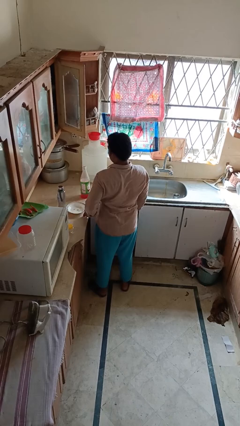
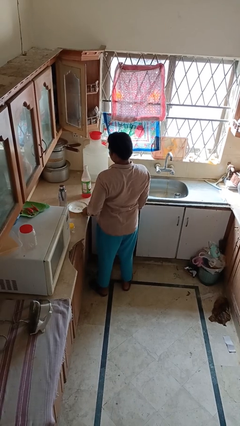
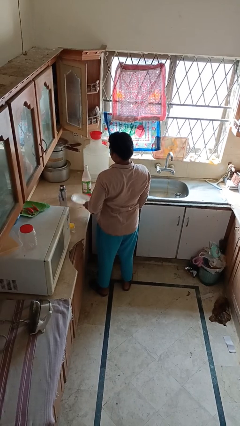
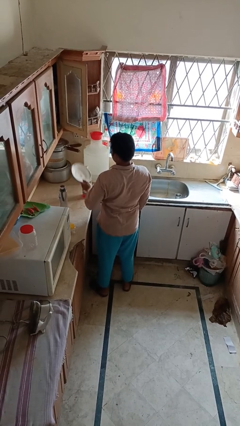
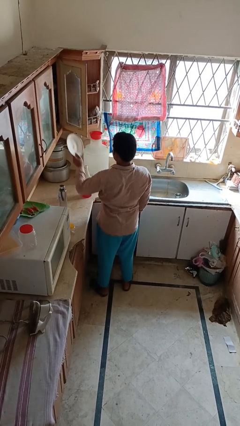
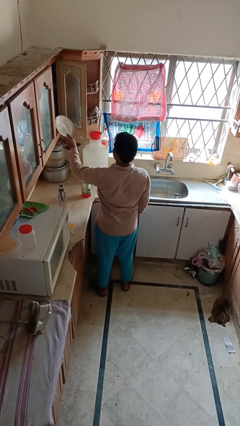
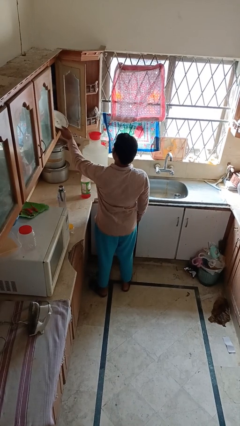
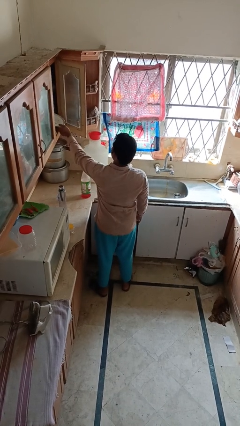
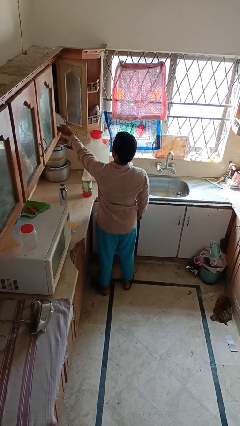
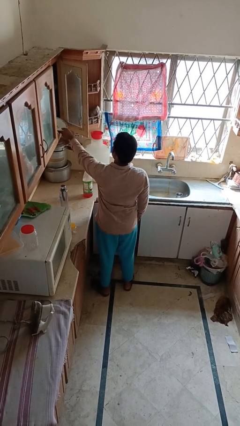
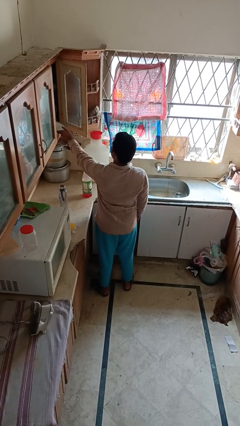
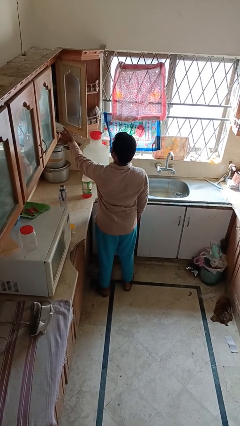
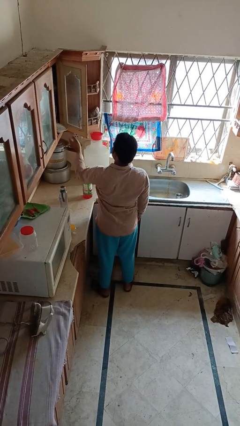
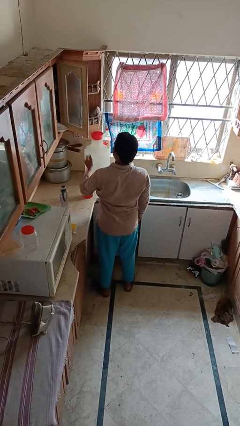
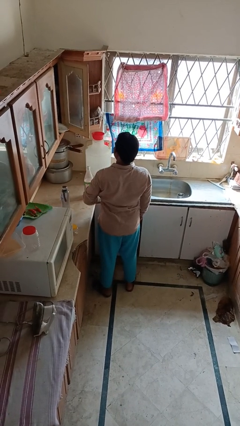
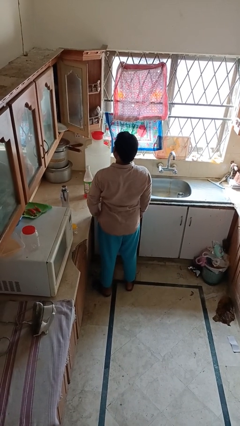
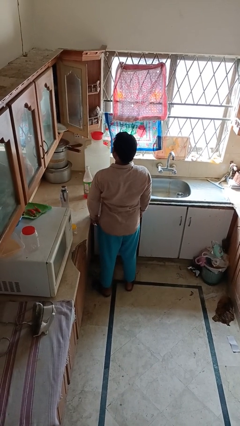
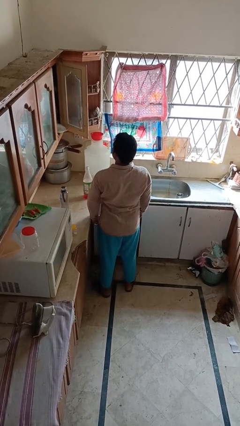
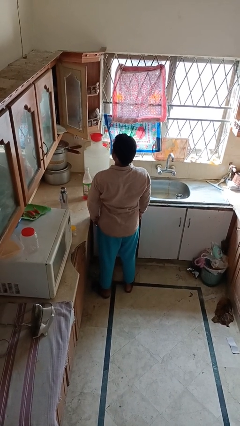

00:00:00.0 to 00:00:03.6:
person puts object in cabinet

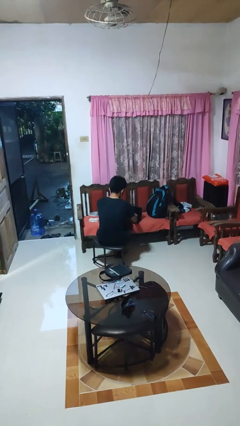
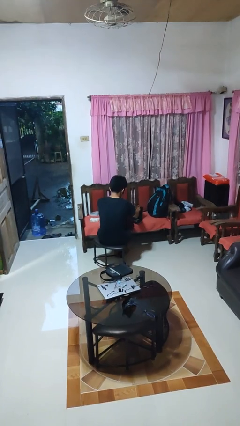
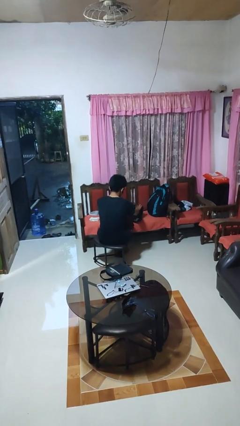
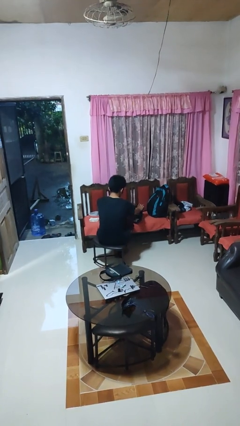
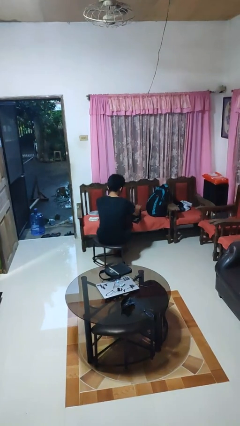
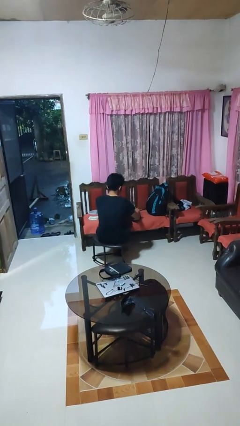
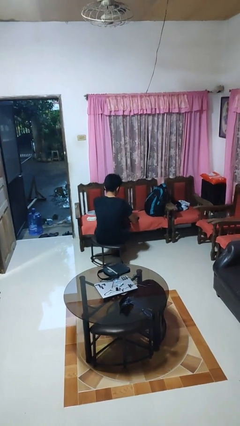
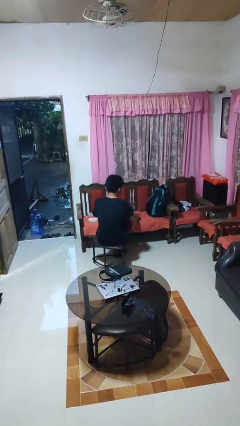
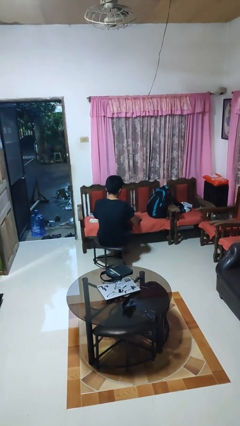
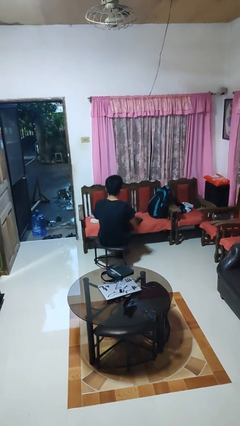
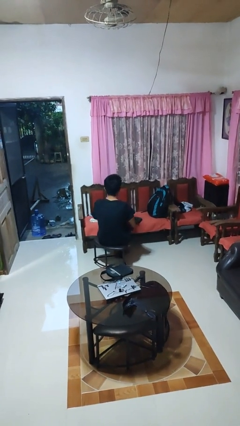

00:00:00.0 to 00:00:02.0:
person closes laptop

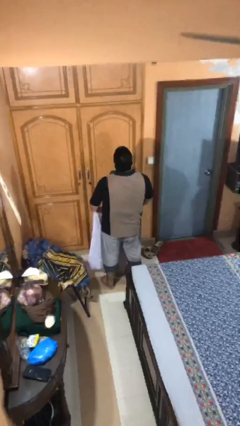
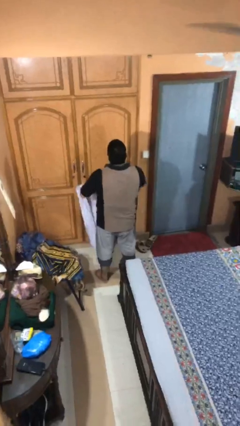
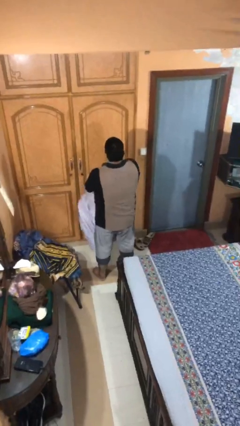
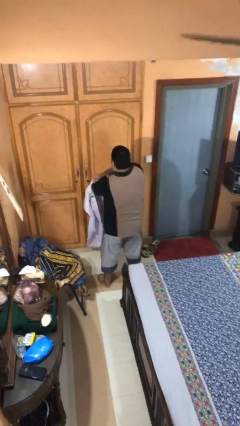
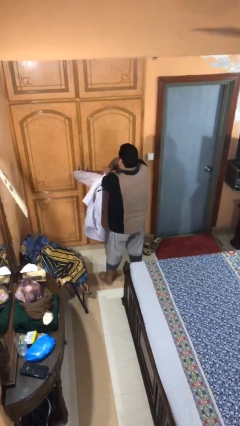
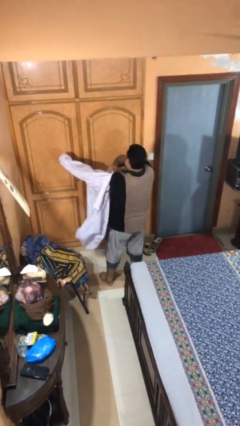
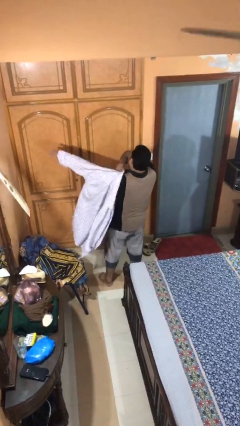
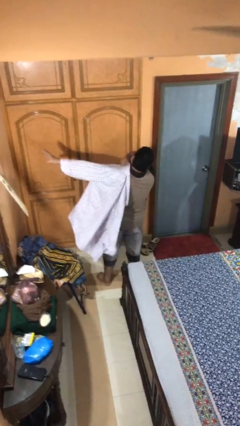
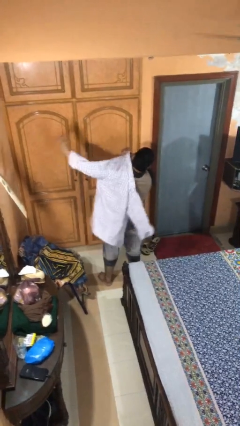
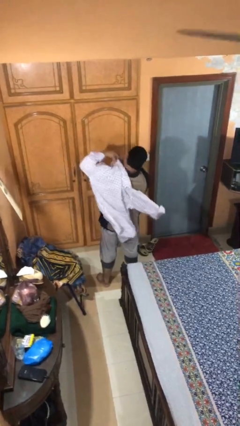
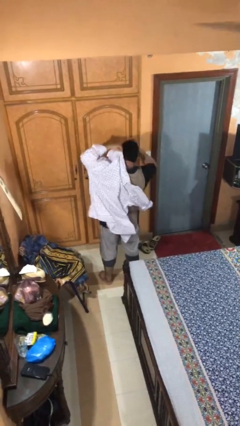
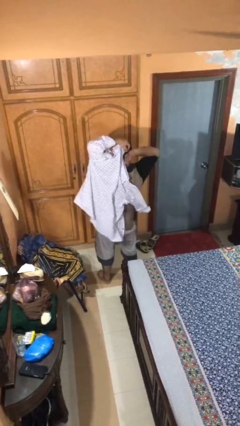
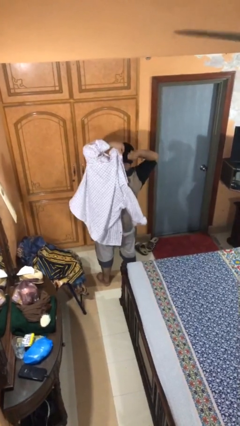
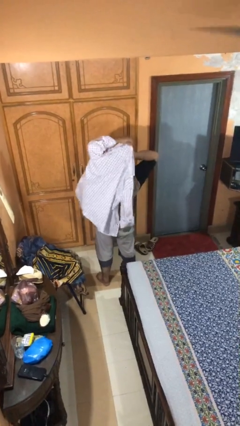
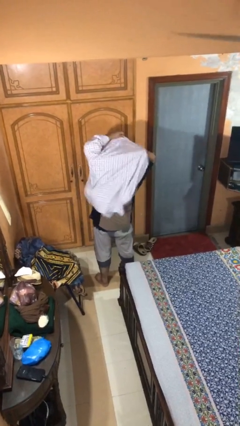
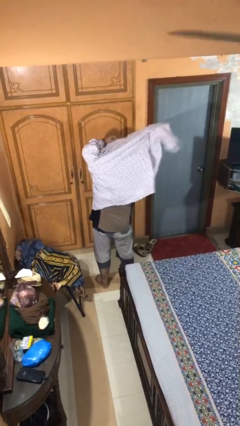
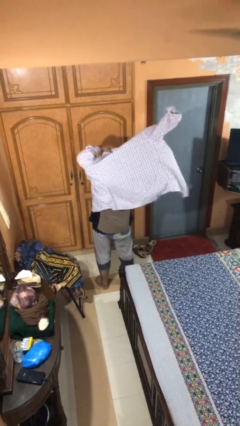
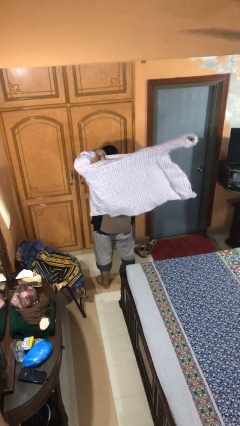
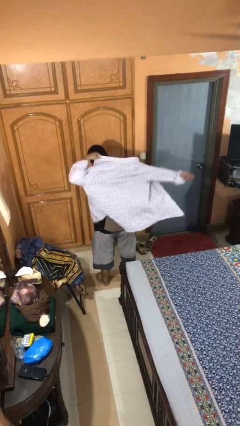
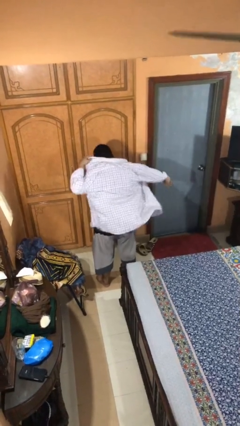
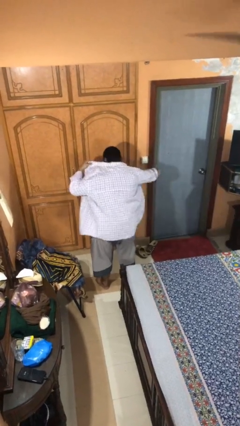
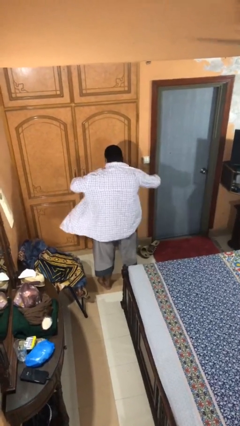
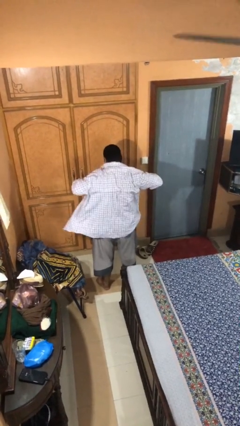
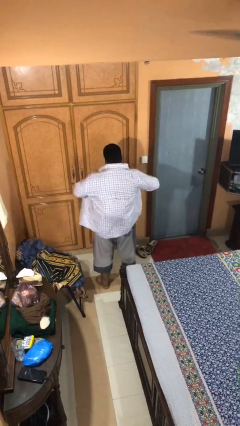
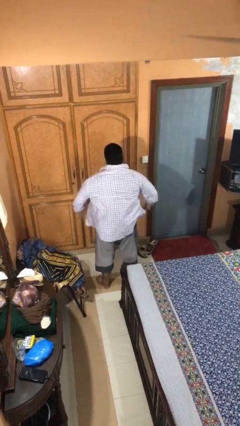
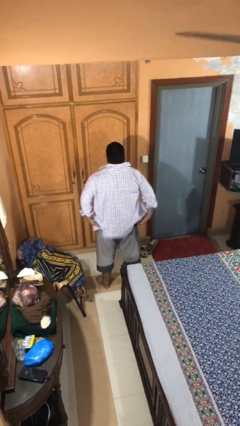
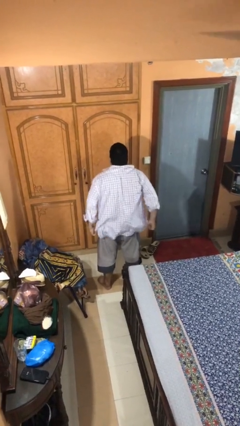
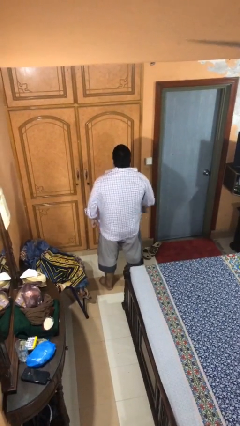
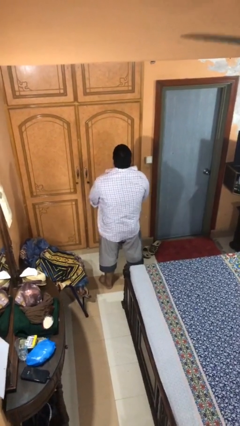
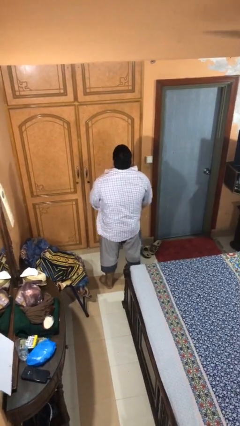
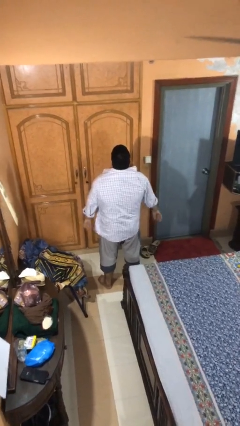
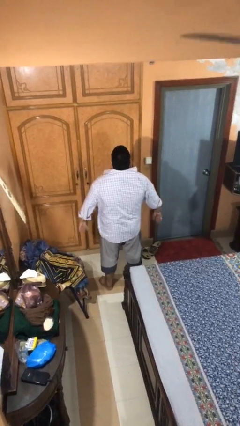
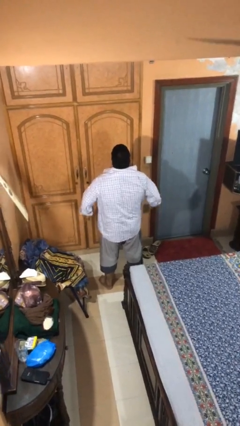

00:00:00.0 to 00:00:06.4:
person puts on shirt

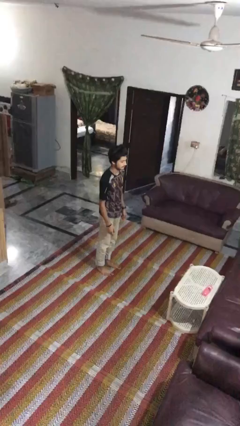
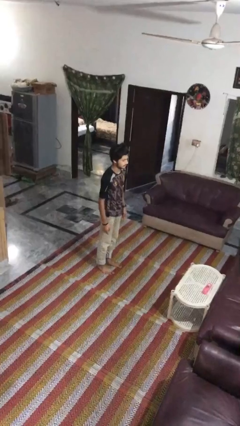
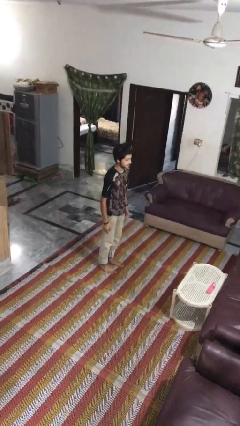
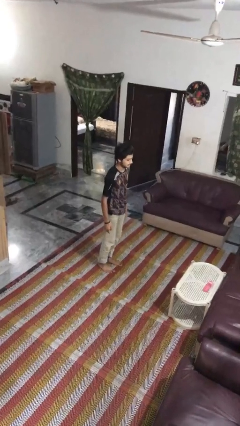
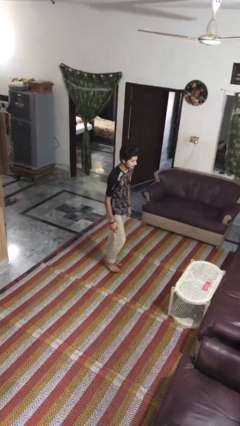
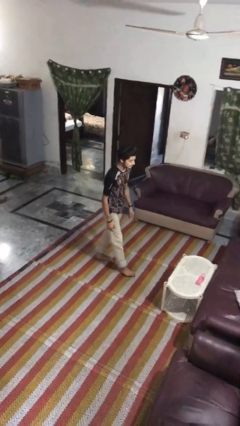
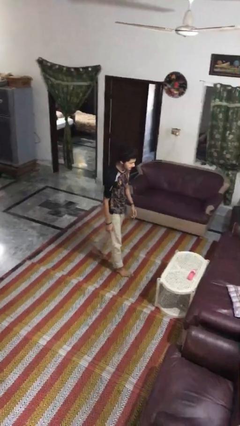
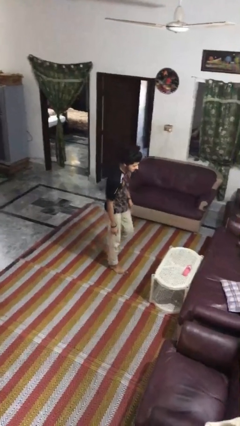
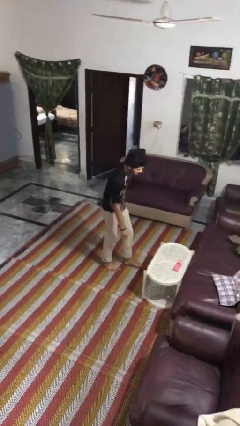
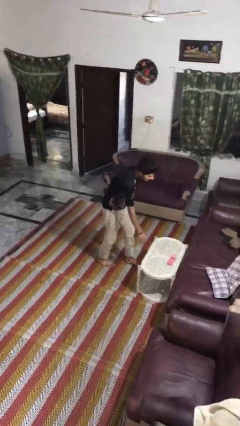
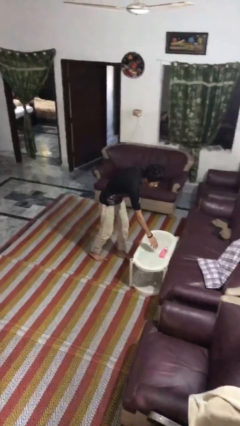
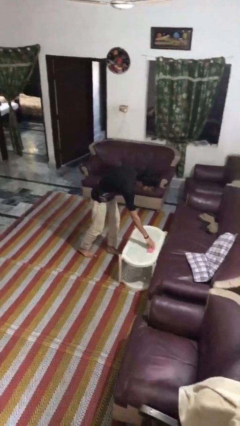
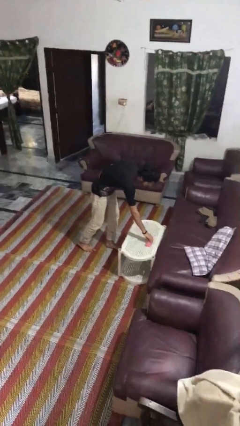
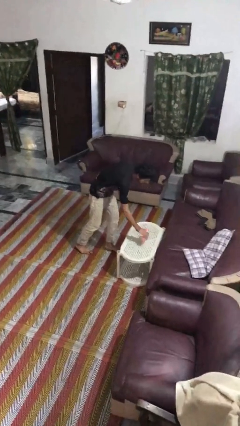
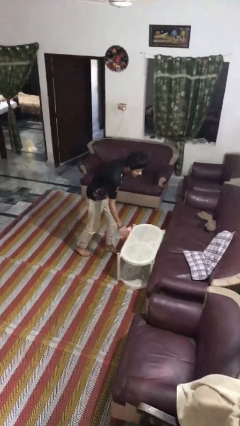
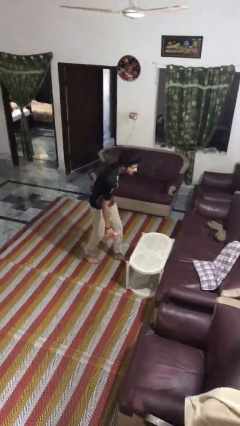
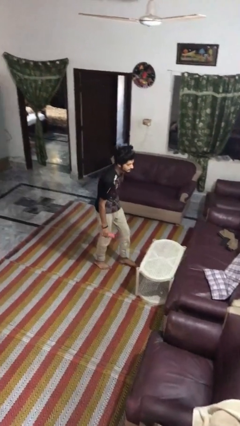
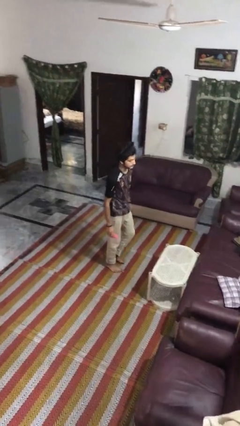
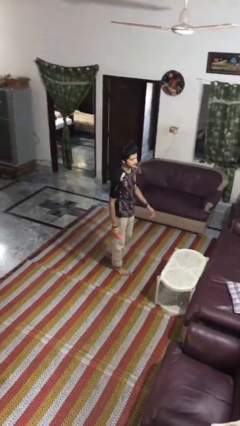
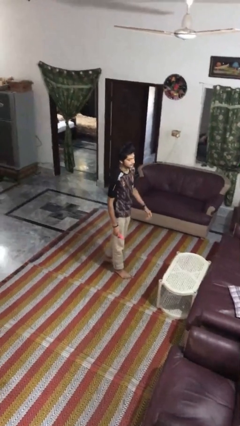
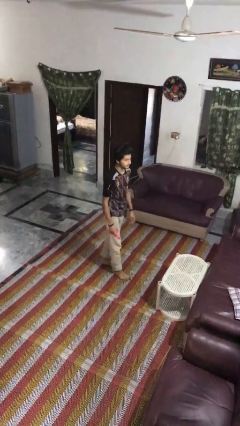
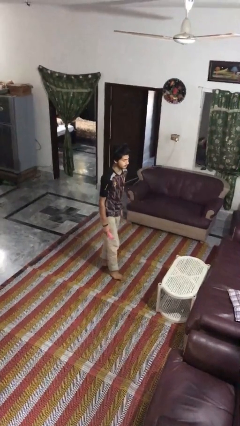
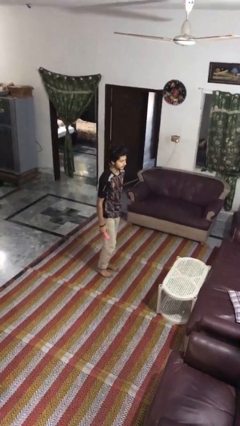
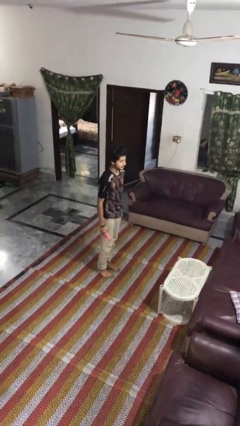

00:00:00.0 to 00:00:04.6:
person picks up object from table

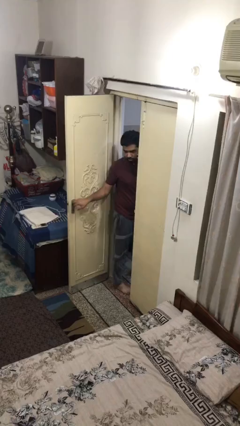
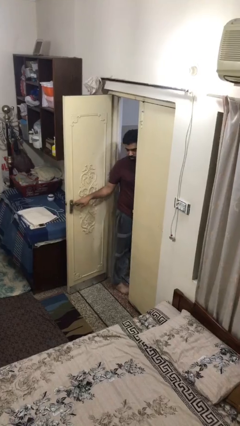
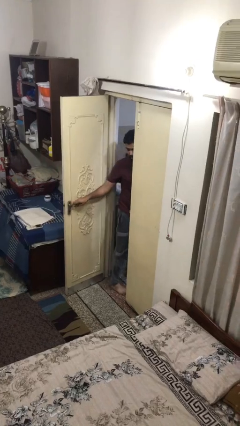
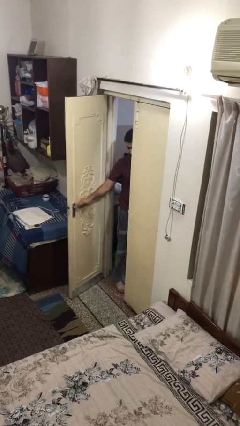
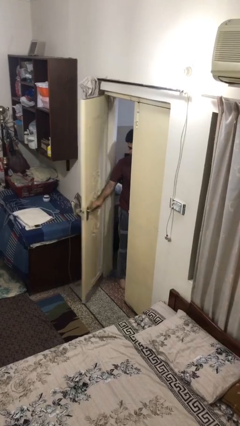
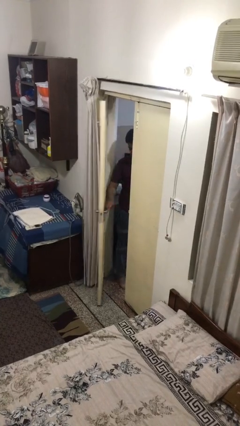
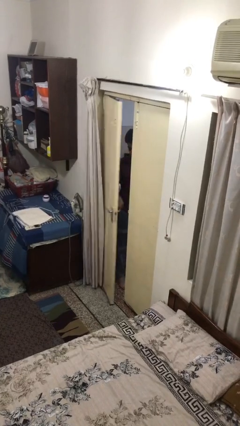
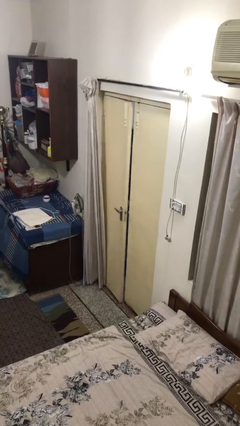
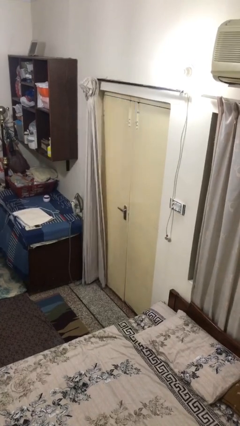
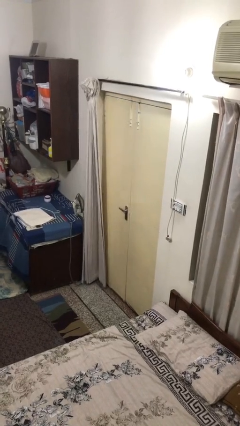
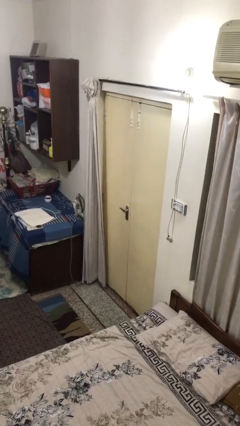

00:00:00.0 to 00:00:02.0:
person closes facility door
